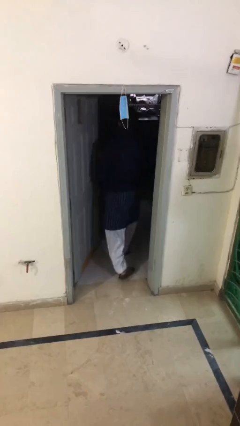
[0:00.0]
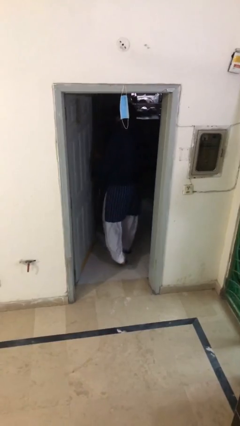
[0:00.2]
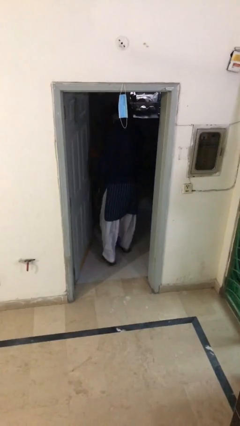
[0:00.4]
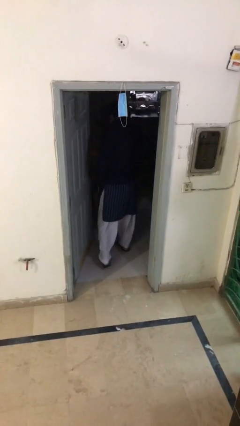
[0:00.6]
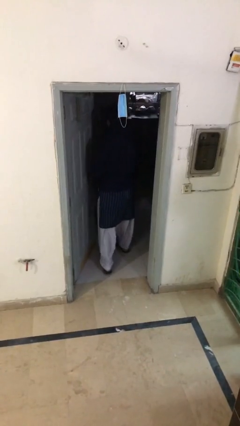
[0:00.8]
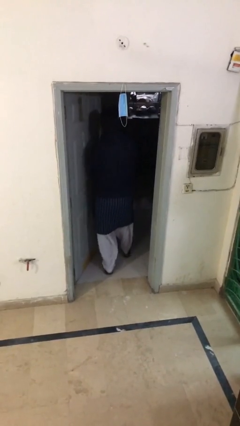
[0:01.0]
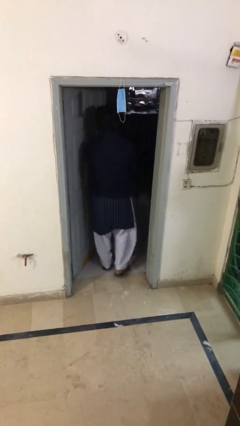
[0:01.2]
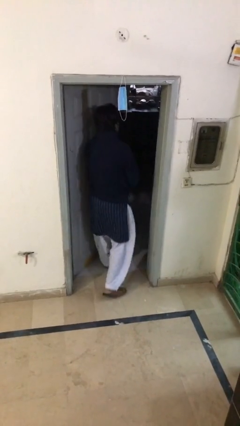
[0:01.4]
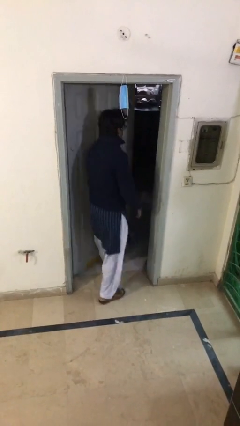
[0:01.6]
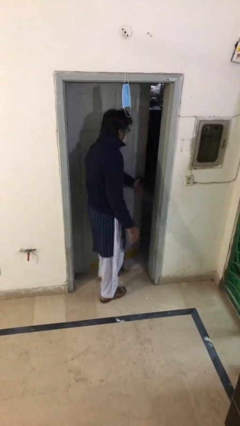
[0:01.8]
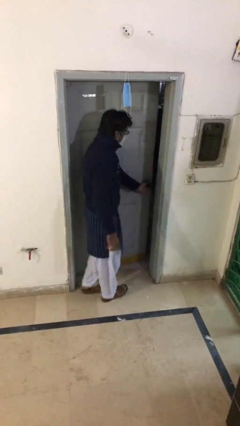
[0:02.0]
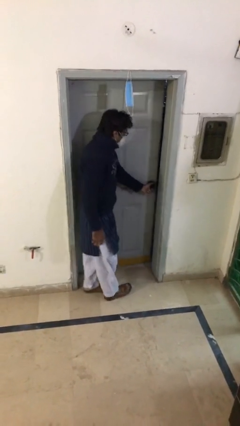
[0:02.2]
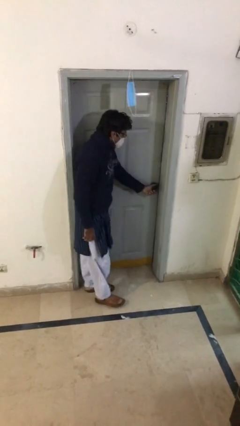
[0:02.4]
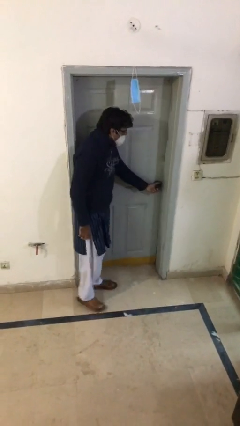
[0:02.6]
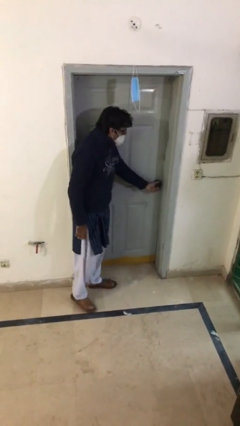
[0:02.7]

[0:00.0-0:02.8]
person closes facility door

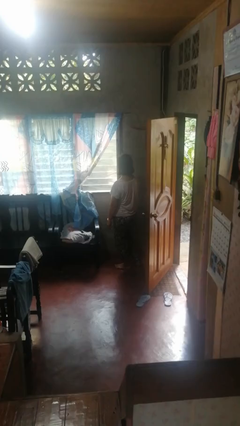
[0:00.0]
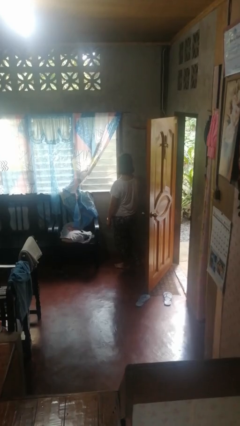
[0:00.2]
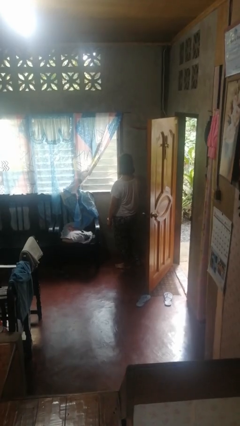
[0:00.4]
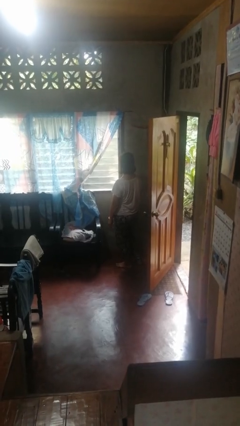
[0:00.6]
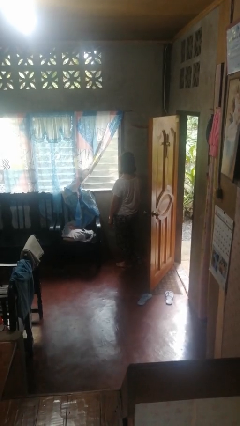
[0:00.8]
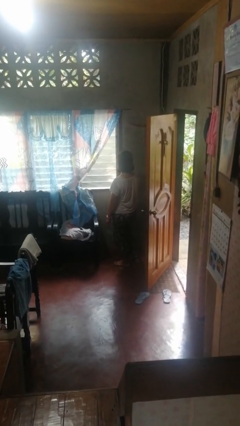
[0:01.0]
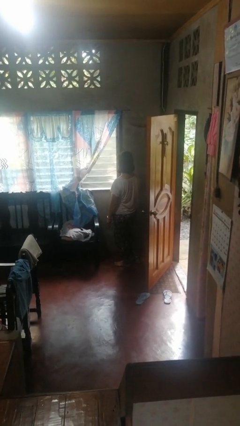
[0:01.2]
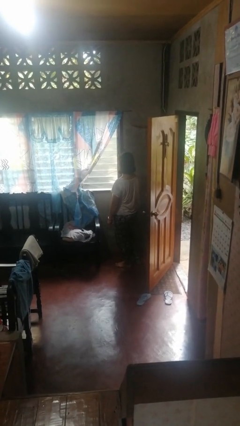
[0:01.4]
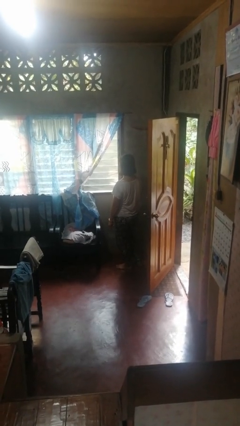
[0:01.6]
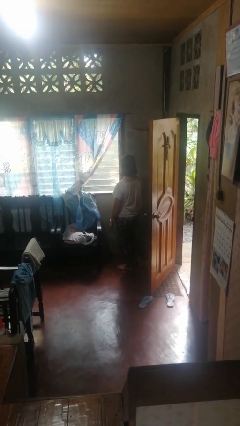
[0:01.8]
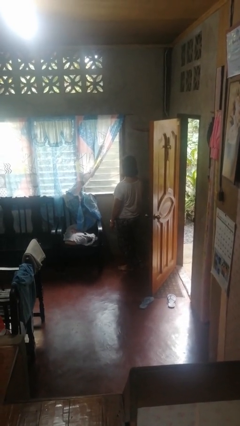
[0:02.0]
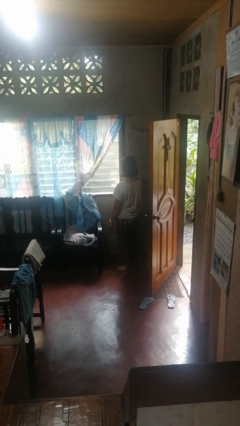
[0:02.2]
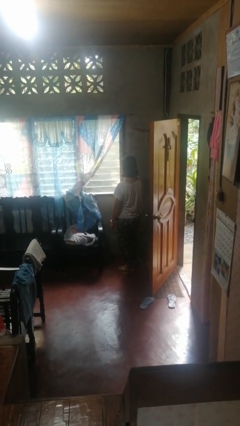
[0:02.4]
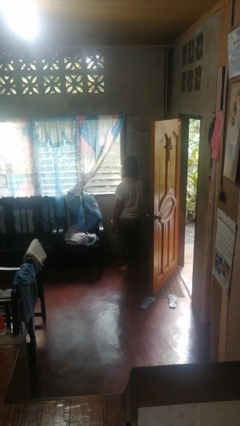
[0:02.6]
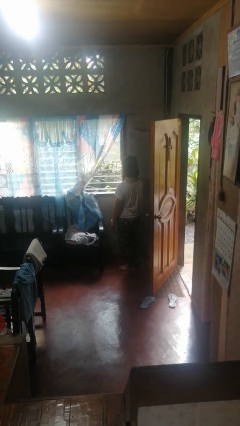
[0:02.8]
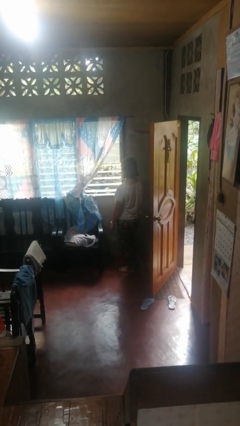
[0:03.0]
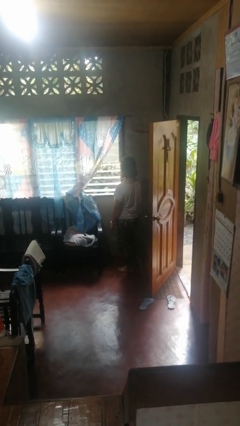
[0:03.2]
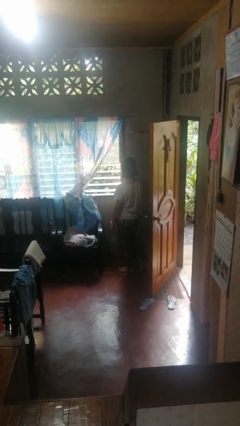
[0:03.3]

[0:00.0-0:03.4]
person opens home window

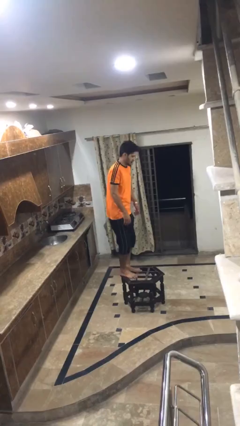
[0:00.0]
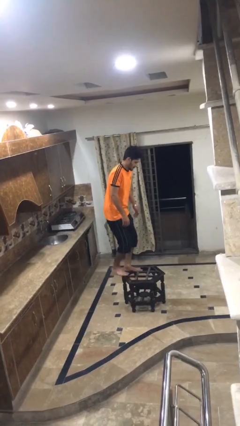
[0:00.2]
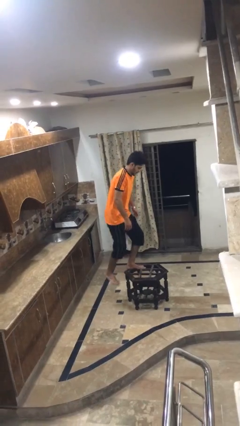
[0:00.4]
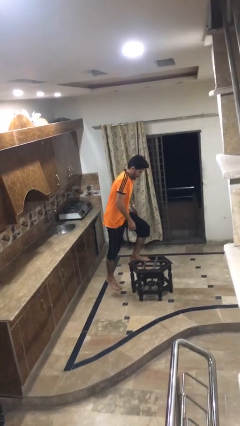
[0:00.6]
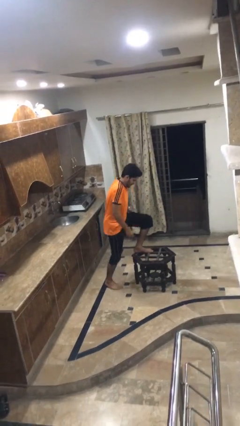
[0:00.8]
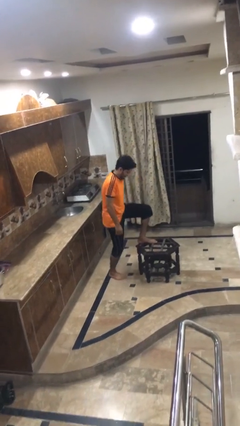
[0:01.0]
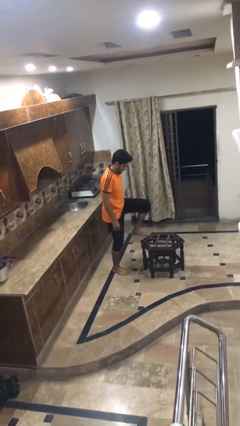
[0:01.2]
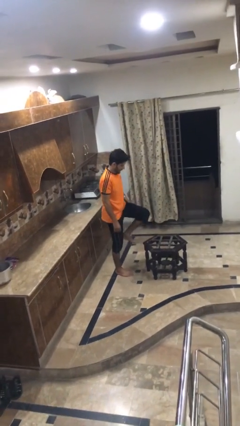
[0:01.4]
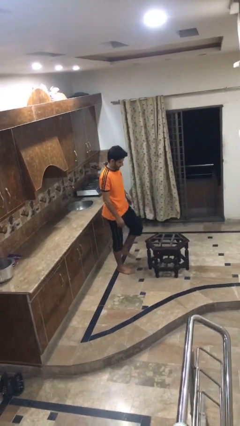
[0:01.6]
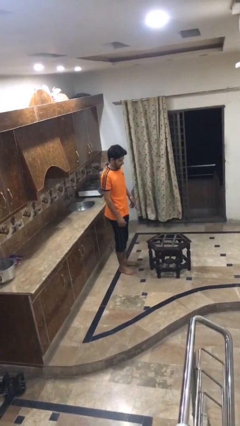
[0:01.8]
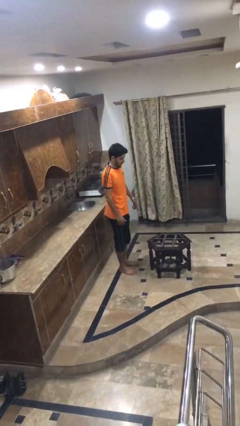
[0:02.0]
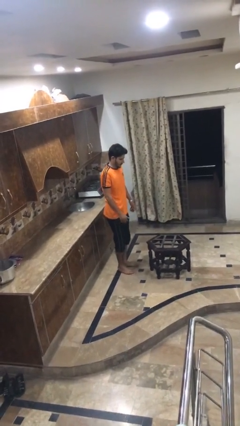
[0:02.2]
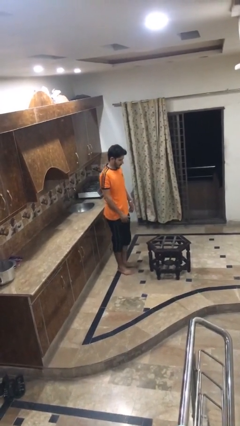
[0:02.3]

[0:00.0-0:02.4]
person climbs off table

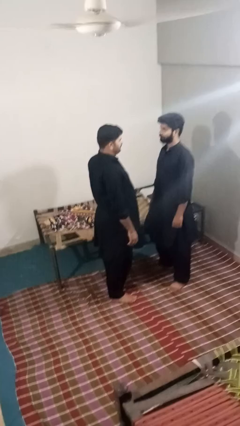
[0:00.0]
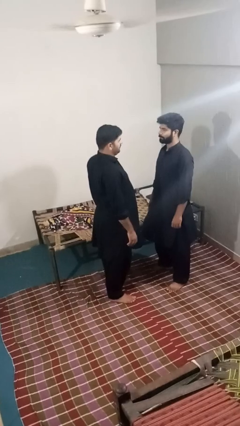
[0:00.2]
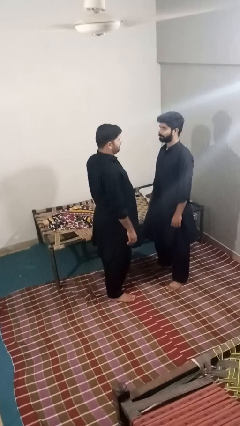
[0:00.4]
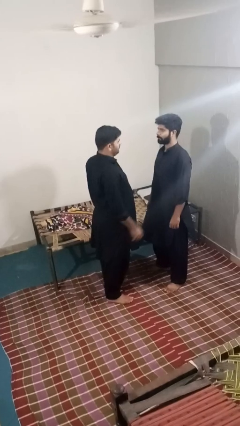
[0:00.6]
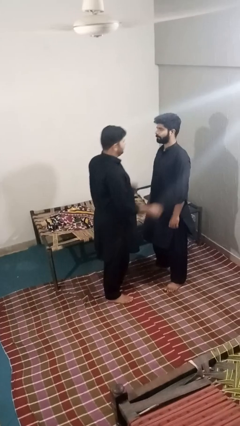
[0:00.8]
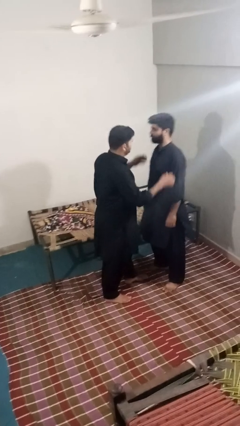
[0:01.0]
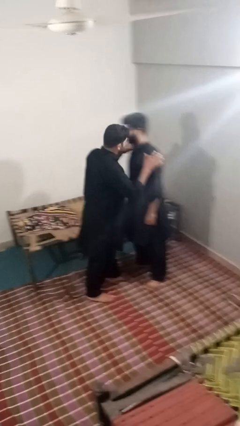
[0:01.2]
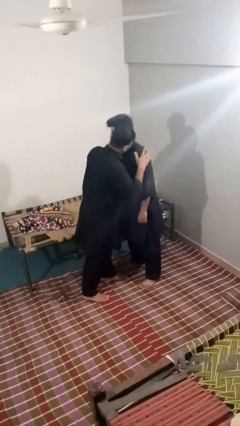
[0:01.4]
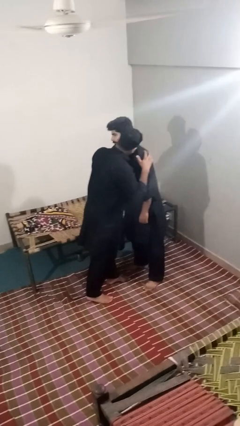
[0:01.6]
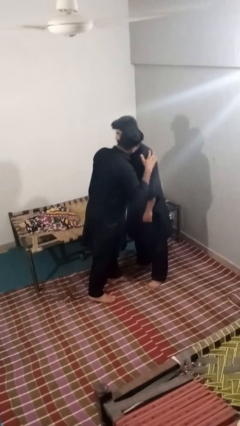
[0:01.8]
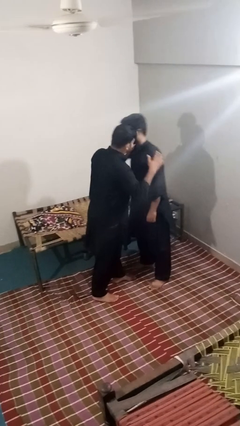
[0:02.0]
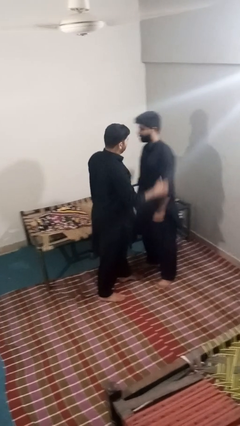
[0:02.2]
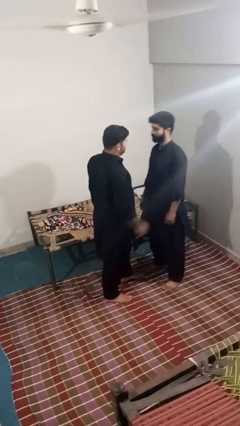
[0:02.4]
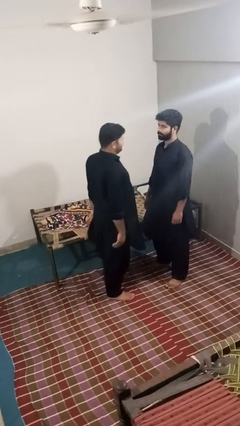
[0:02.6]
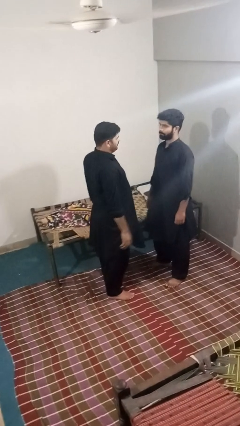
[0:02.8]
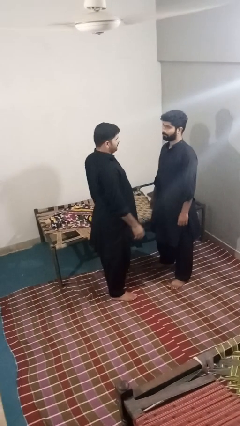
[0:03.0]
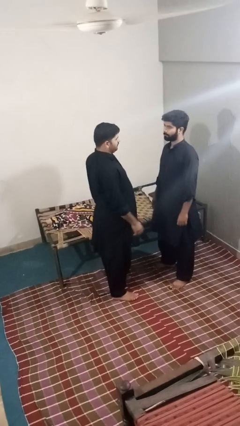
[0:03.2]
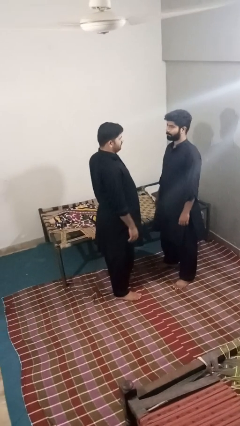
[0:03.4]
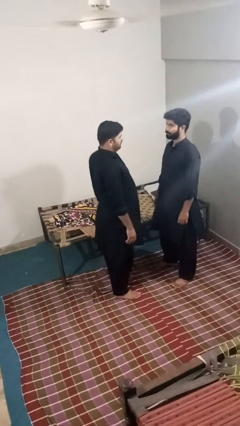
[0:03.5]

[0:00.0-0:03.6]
person kisses cheek of person

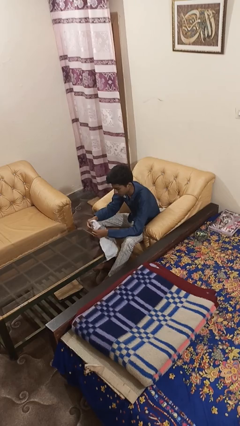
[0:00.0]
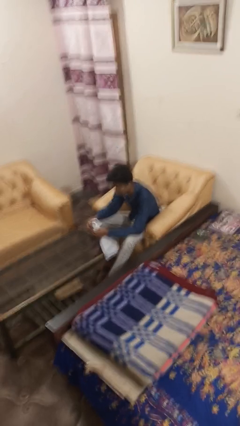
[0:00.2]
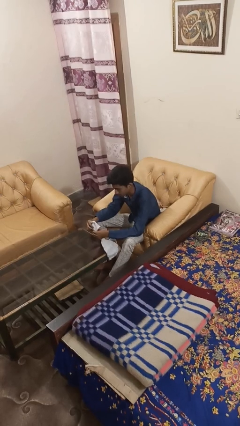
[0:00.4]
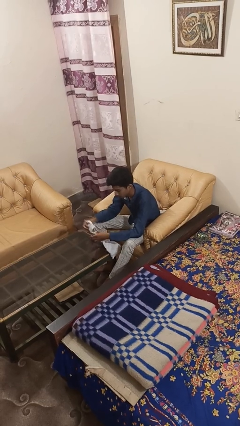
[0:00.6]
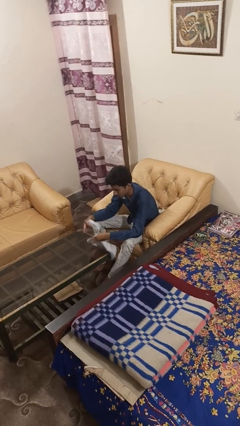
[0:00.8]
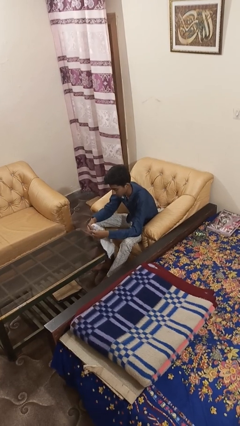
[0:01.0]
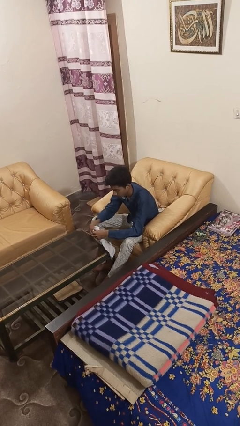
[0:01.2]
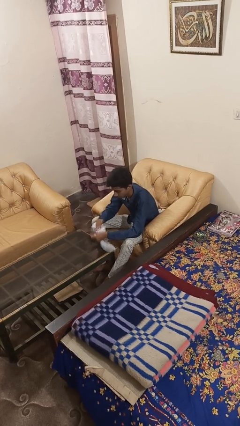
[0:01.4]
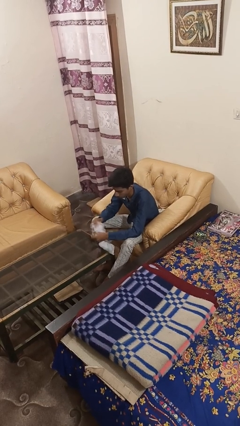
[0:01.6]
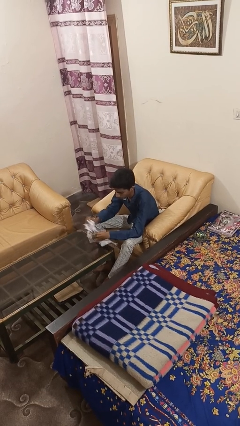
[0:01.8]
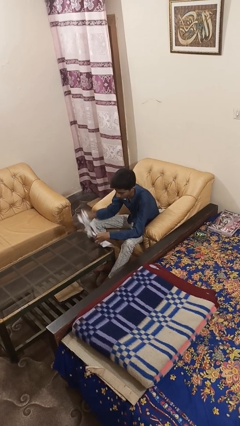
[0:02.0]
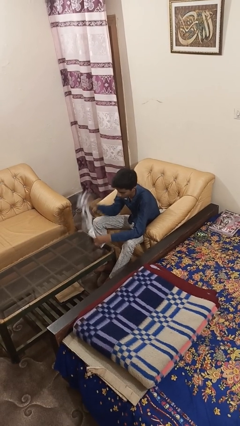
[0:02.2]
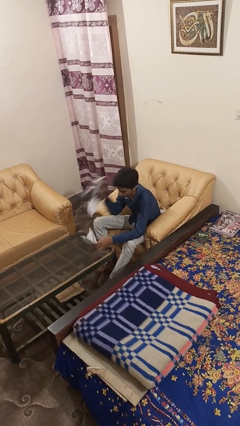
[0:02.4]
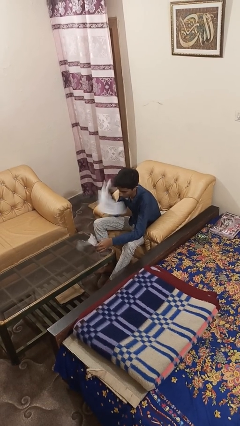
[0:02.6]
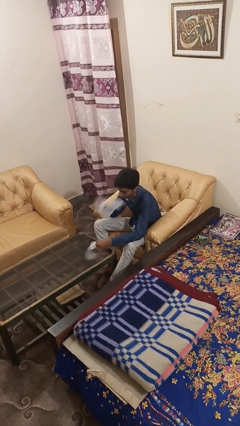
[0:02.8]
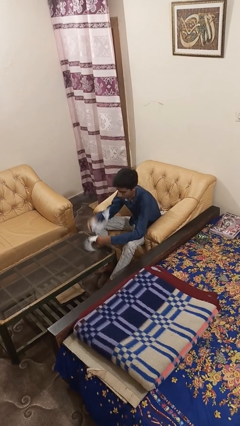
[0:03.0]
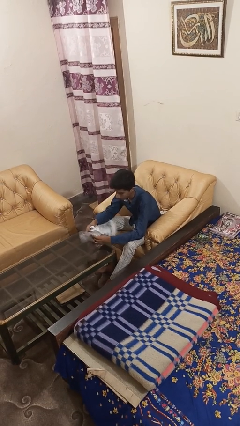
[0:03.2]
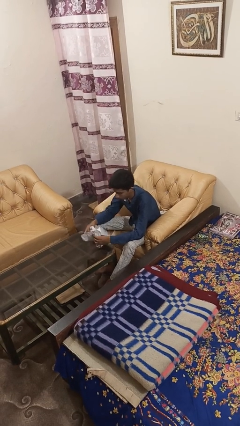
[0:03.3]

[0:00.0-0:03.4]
person tears paper

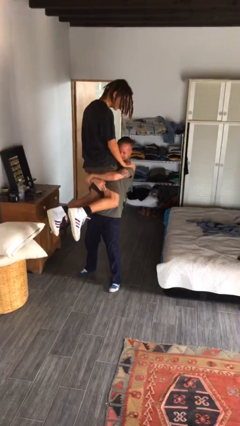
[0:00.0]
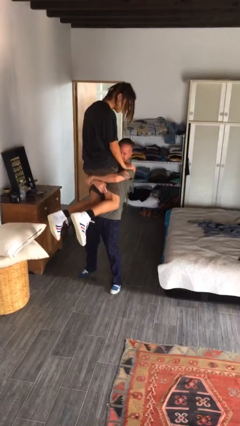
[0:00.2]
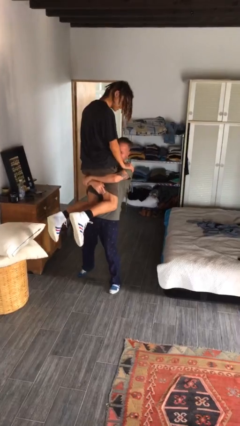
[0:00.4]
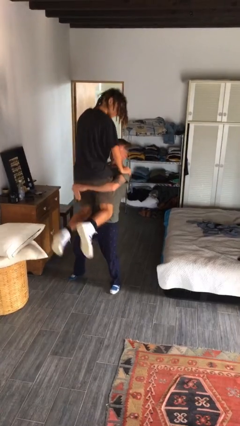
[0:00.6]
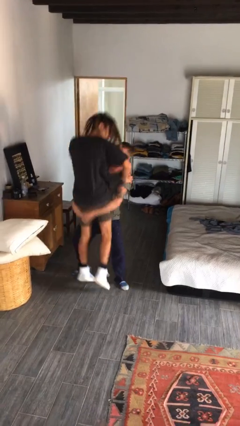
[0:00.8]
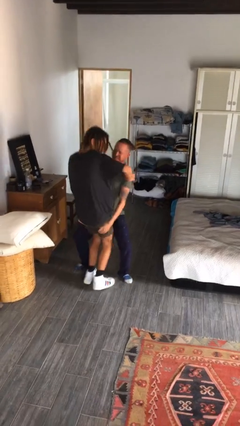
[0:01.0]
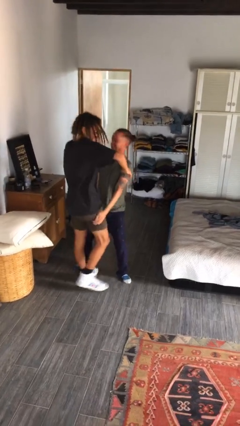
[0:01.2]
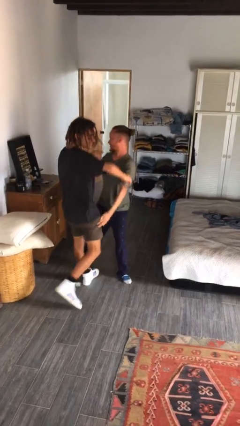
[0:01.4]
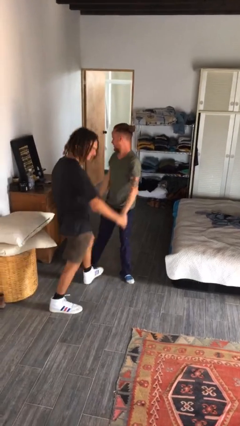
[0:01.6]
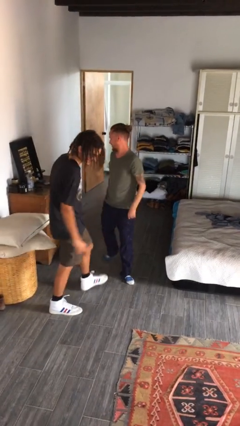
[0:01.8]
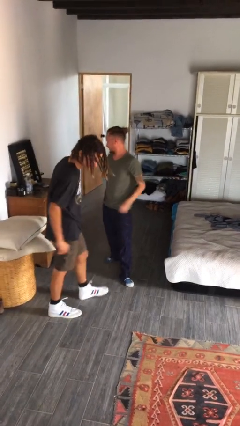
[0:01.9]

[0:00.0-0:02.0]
person puts down person
